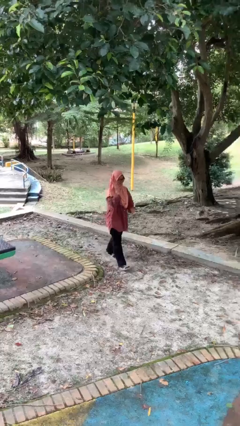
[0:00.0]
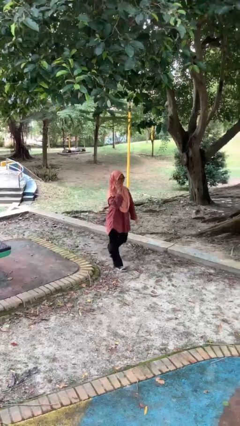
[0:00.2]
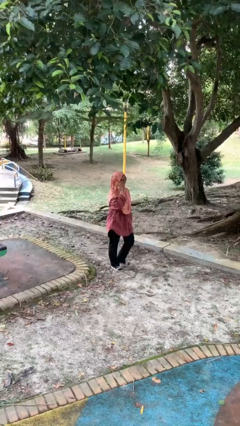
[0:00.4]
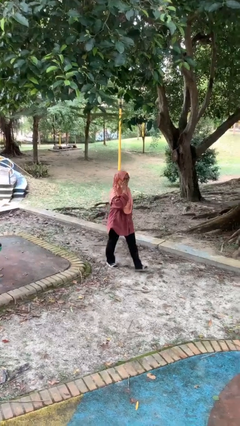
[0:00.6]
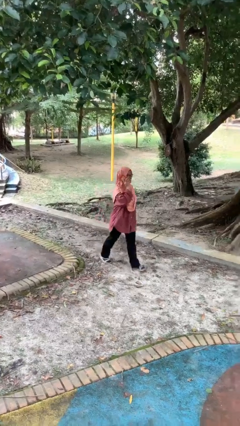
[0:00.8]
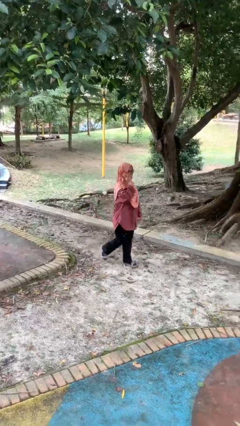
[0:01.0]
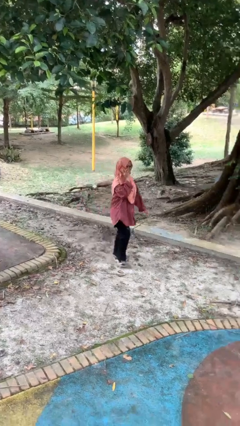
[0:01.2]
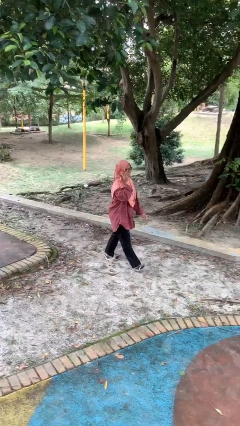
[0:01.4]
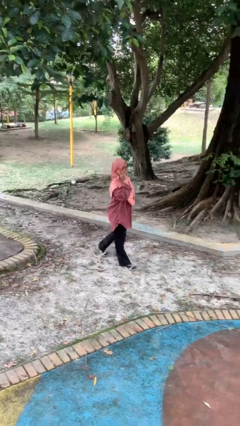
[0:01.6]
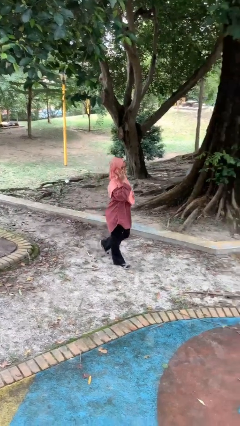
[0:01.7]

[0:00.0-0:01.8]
person talks on phone

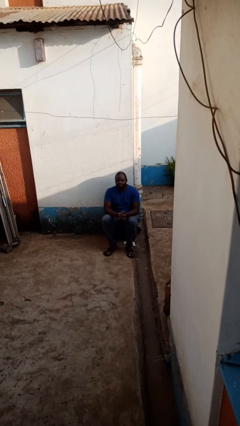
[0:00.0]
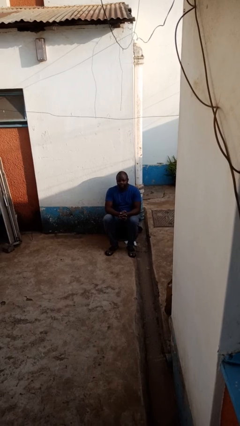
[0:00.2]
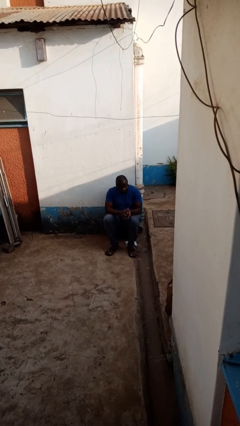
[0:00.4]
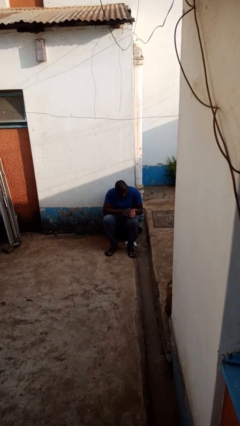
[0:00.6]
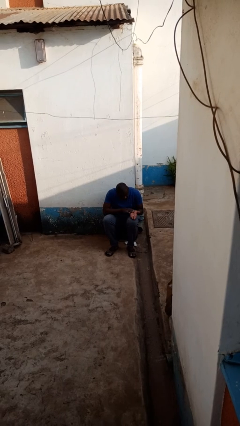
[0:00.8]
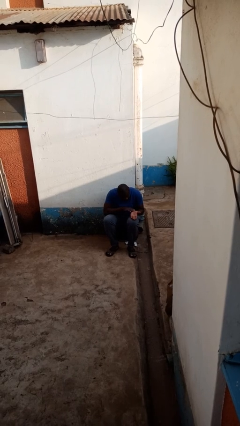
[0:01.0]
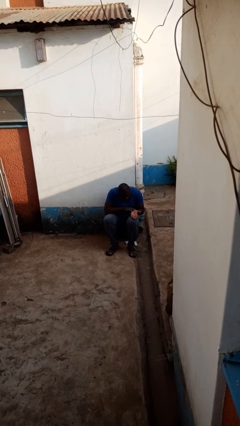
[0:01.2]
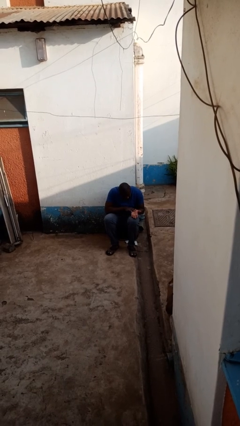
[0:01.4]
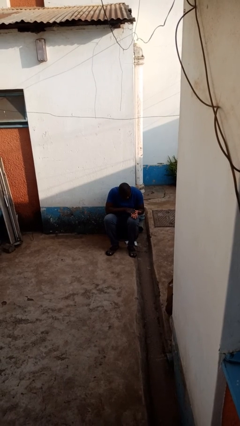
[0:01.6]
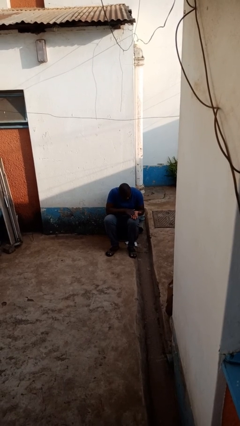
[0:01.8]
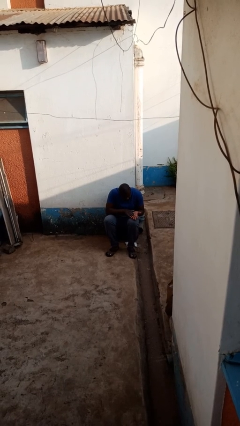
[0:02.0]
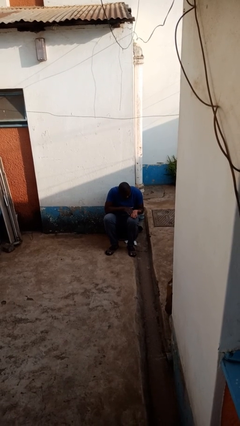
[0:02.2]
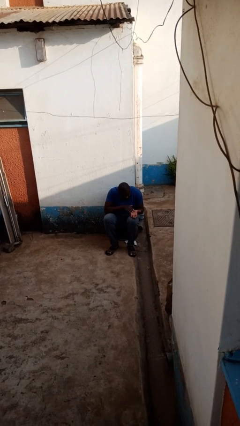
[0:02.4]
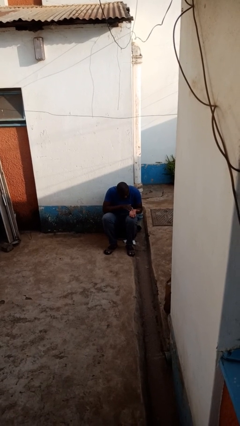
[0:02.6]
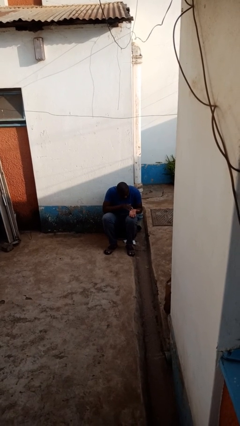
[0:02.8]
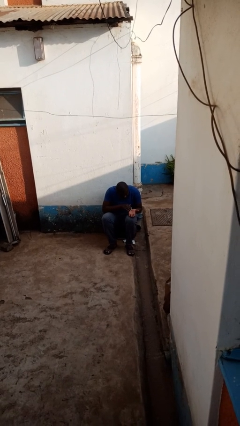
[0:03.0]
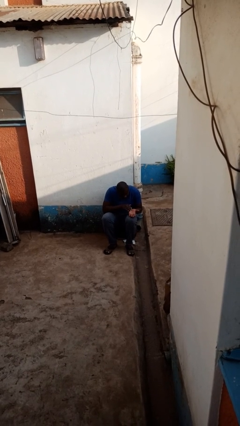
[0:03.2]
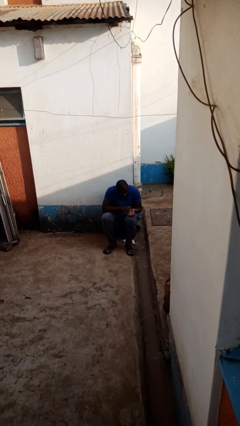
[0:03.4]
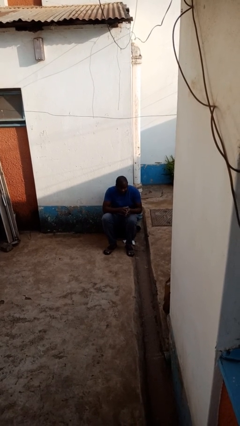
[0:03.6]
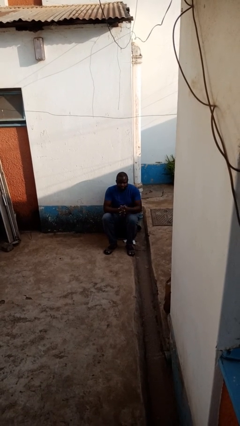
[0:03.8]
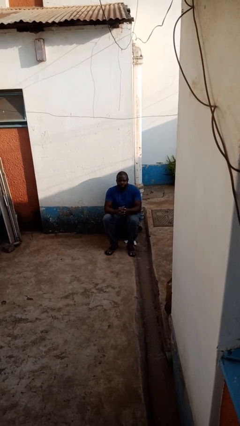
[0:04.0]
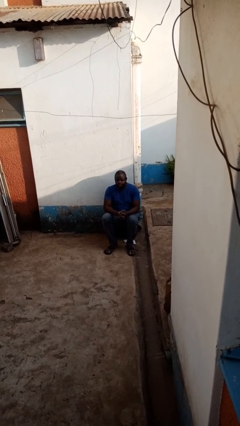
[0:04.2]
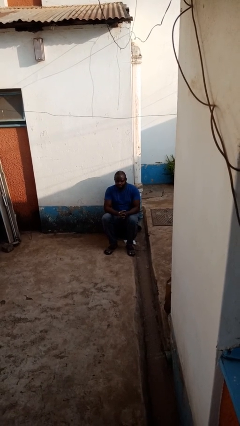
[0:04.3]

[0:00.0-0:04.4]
person looks at hands in lap

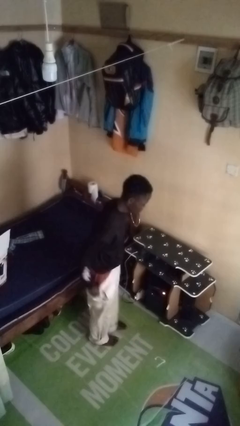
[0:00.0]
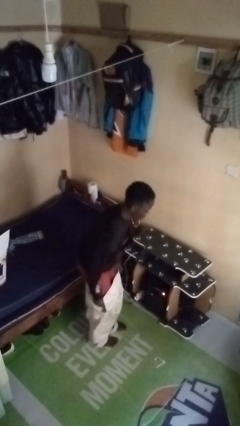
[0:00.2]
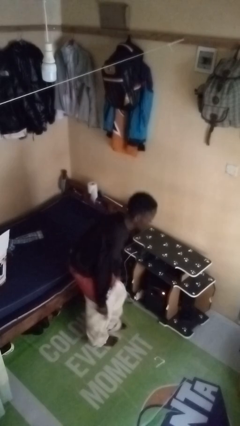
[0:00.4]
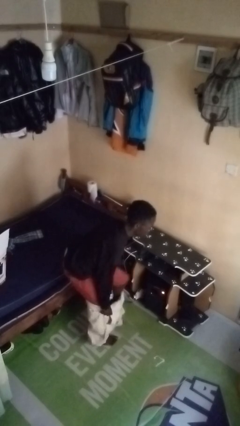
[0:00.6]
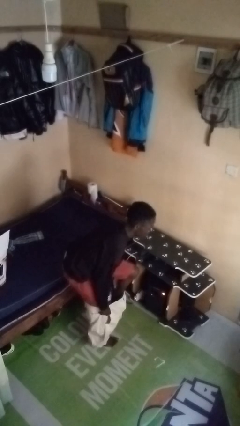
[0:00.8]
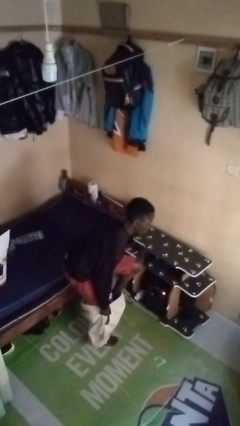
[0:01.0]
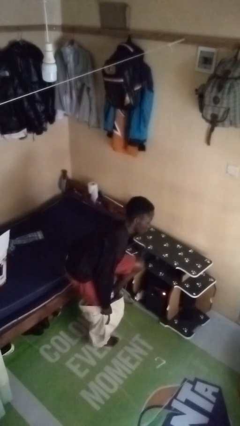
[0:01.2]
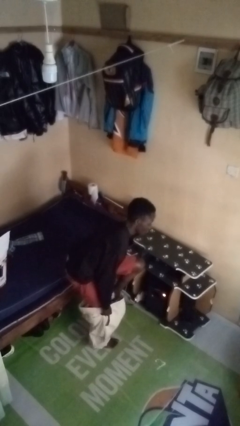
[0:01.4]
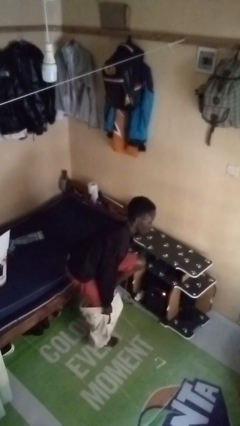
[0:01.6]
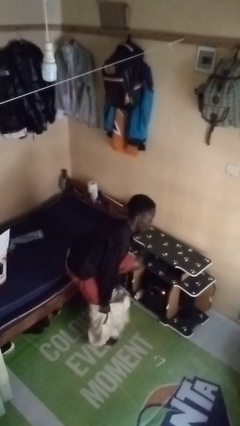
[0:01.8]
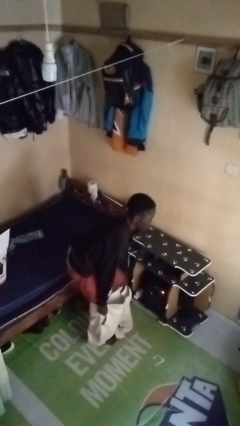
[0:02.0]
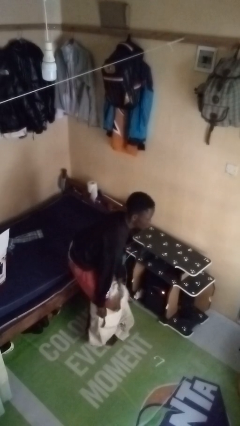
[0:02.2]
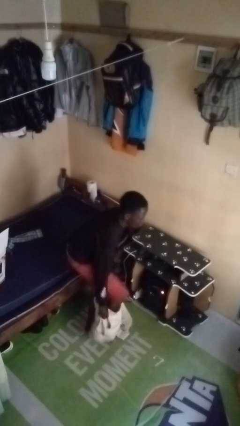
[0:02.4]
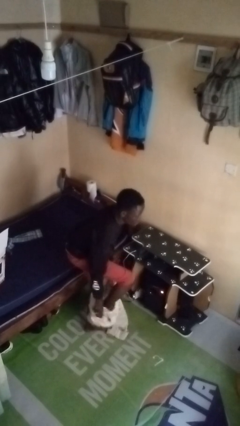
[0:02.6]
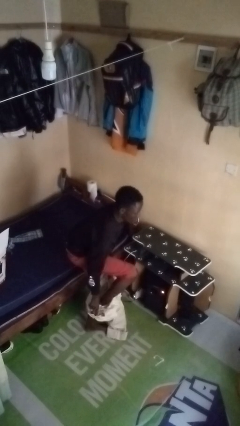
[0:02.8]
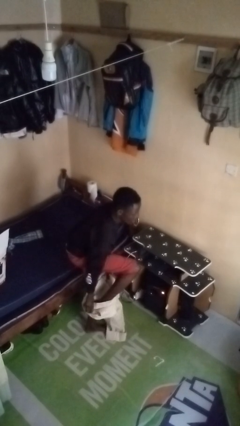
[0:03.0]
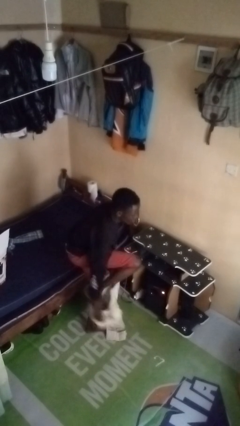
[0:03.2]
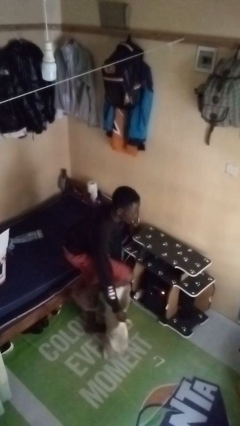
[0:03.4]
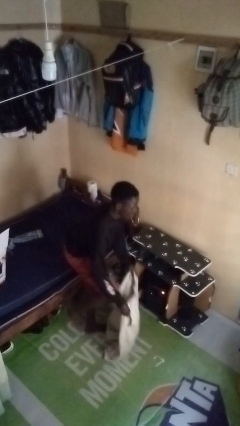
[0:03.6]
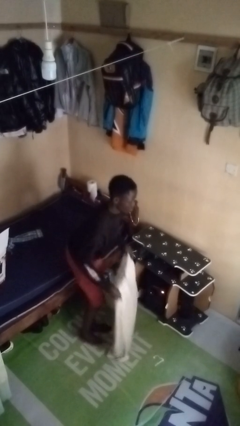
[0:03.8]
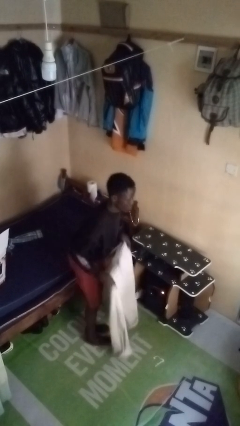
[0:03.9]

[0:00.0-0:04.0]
person takes off pants

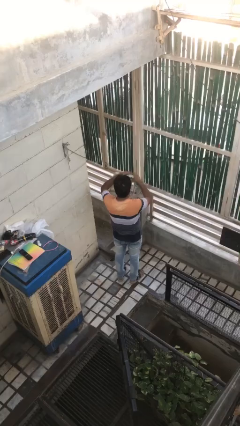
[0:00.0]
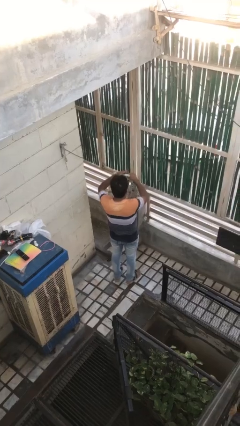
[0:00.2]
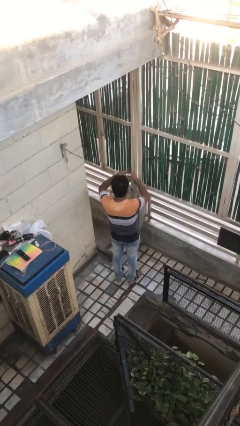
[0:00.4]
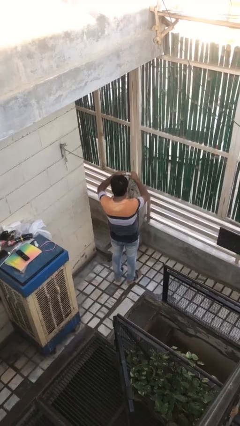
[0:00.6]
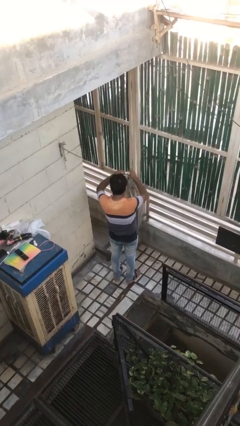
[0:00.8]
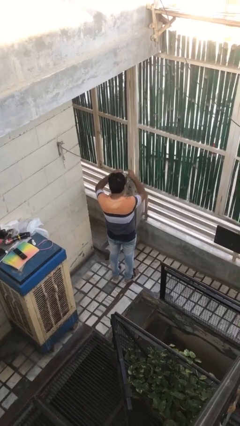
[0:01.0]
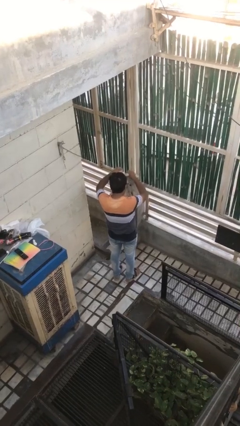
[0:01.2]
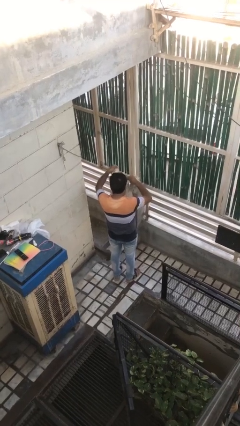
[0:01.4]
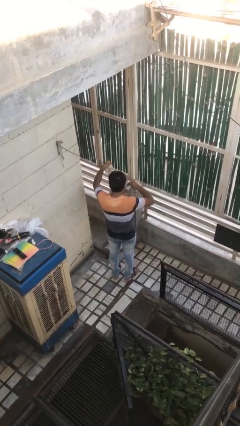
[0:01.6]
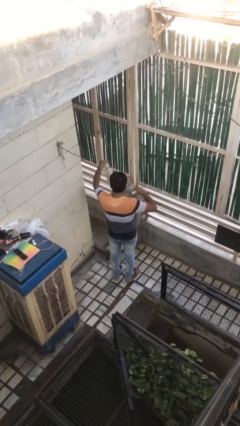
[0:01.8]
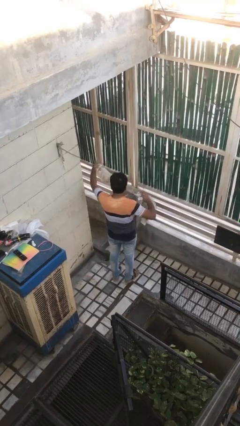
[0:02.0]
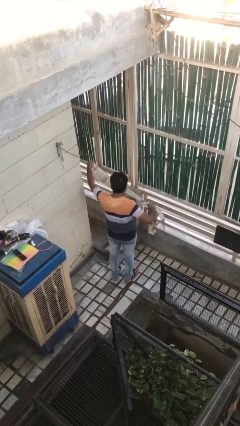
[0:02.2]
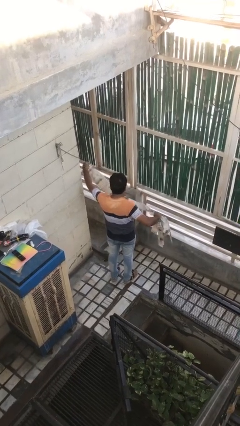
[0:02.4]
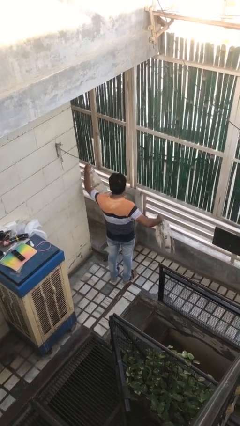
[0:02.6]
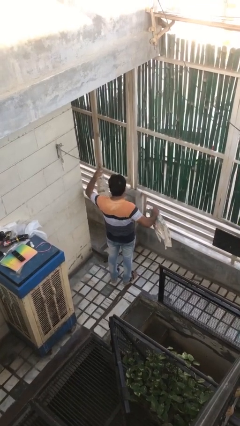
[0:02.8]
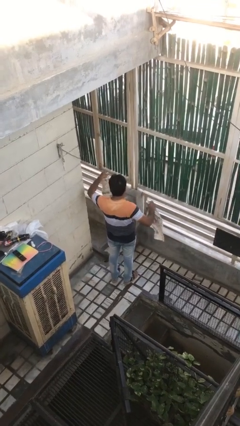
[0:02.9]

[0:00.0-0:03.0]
person tears paper

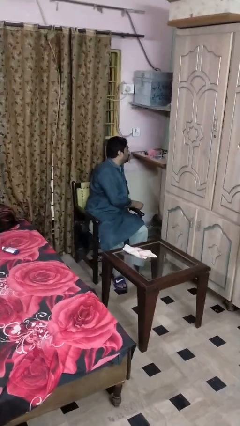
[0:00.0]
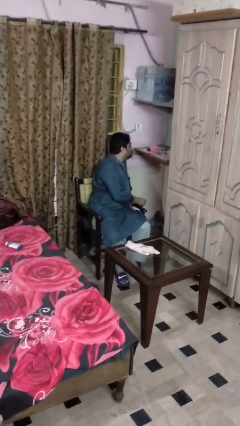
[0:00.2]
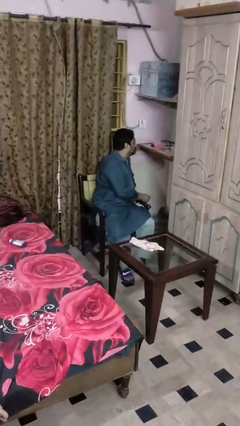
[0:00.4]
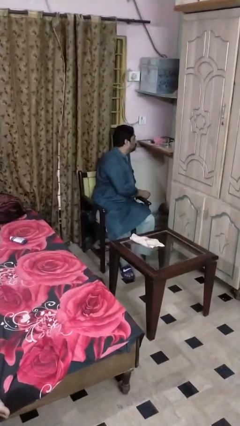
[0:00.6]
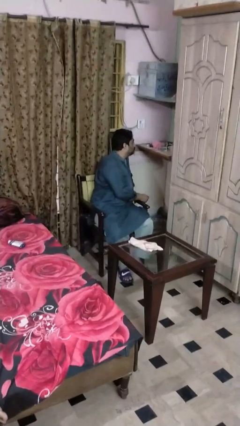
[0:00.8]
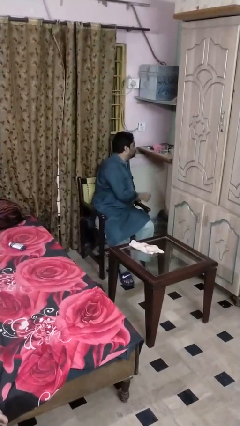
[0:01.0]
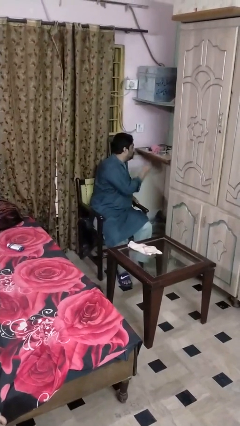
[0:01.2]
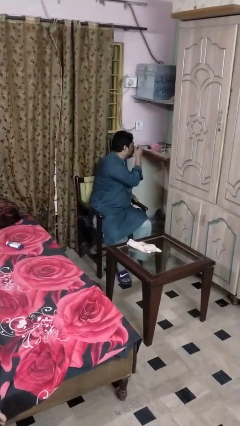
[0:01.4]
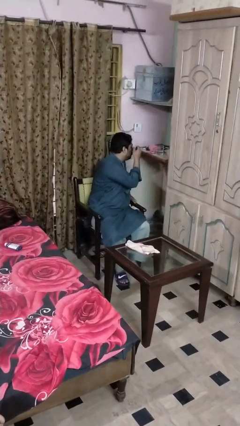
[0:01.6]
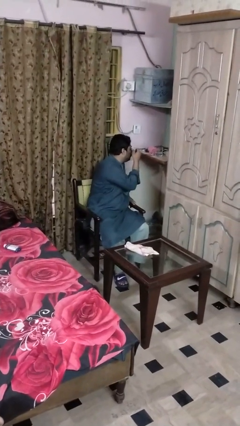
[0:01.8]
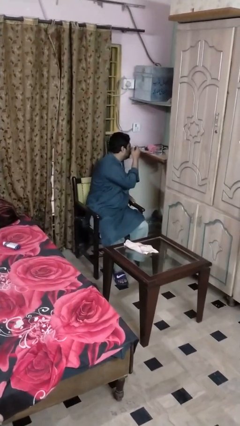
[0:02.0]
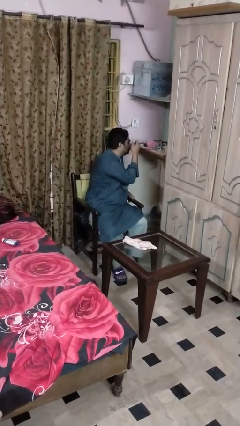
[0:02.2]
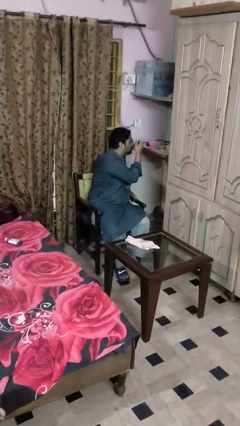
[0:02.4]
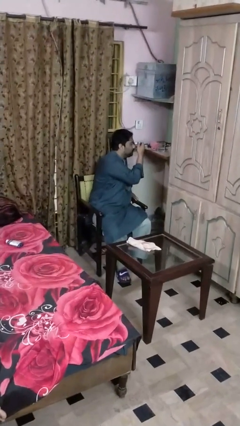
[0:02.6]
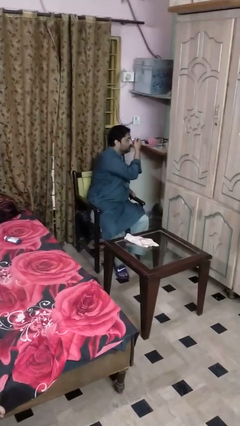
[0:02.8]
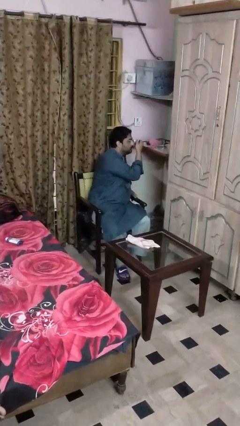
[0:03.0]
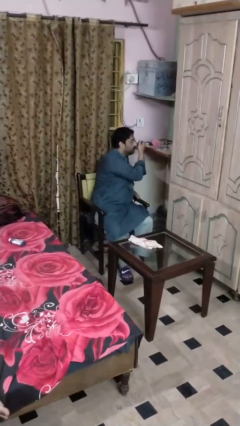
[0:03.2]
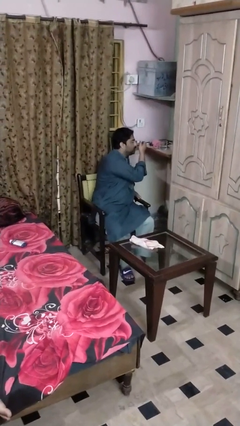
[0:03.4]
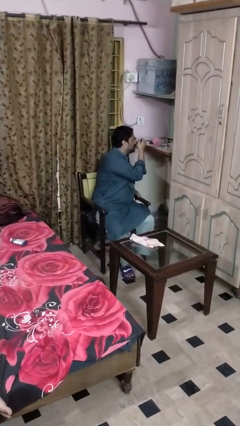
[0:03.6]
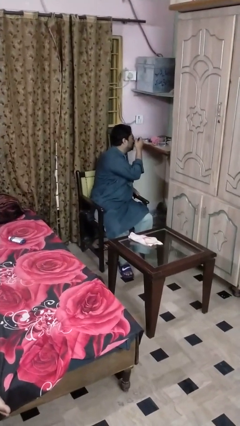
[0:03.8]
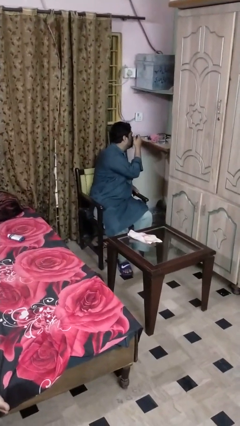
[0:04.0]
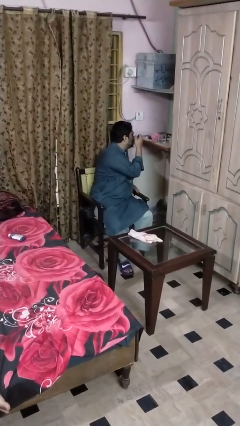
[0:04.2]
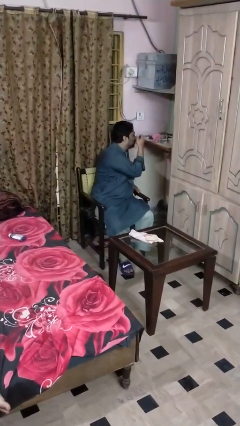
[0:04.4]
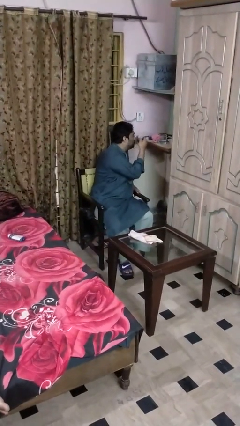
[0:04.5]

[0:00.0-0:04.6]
person applies eye makeup
